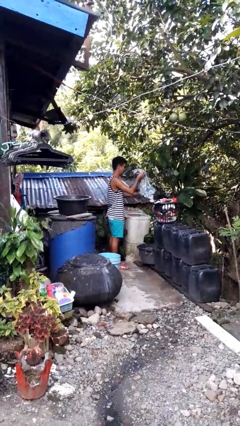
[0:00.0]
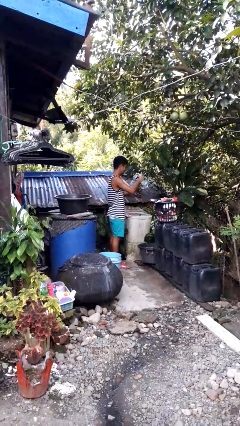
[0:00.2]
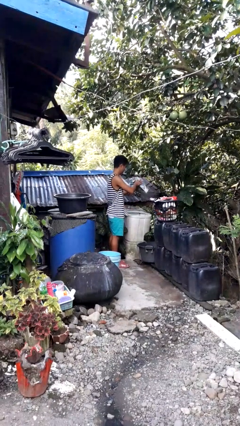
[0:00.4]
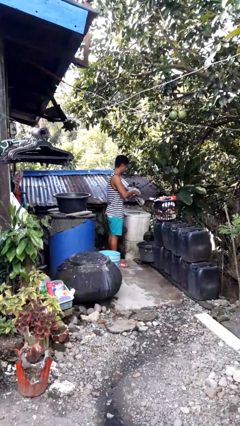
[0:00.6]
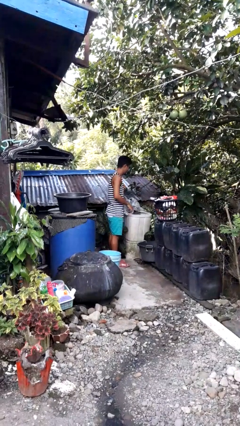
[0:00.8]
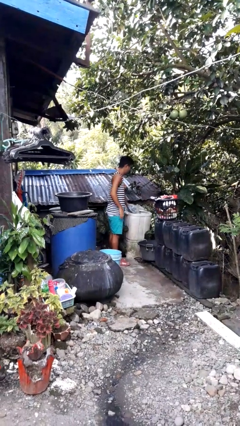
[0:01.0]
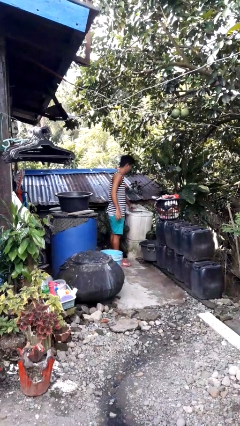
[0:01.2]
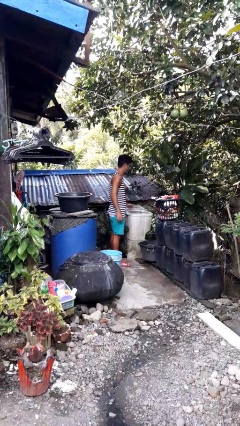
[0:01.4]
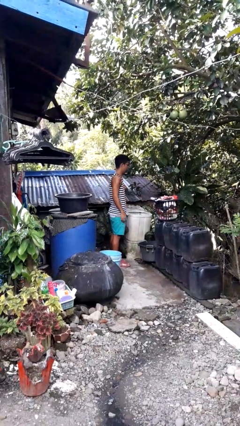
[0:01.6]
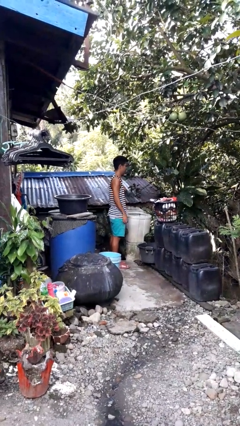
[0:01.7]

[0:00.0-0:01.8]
person loads clotheswasher

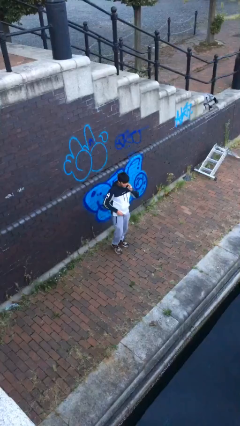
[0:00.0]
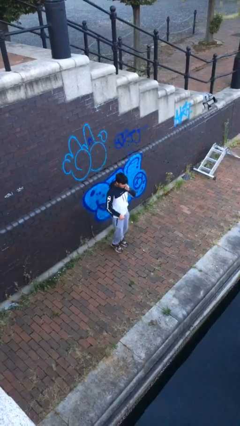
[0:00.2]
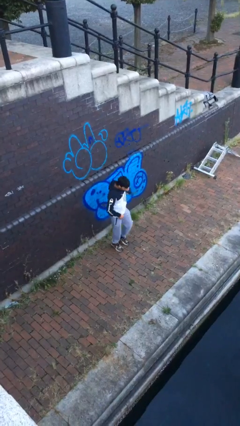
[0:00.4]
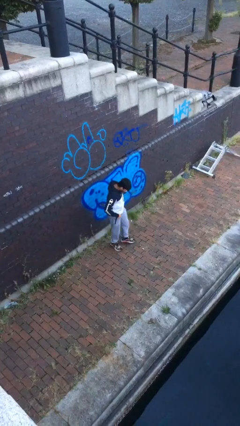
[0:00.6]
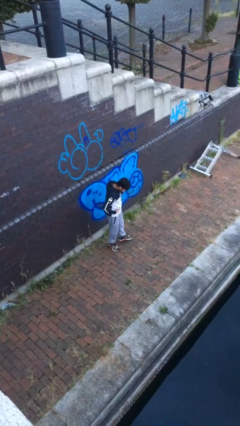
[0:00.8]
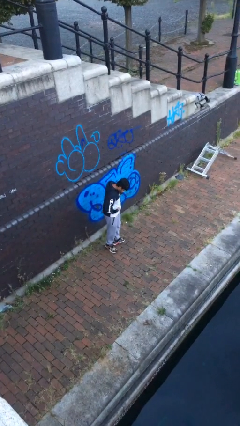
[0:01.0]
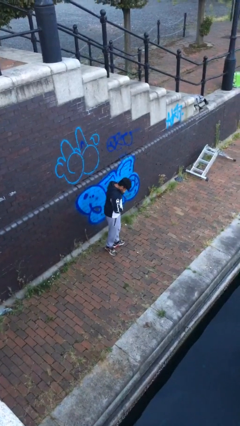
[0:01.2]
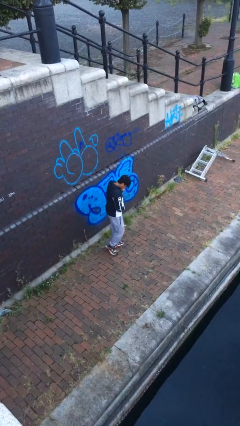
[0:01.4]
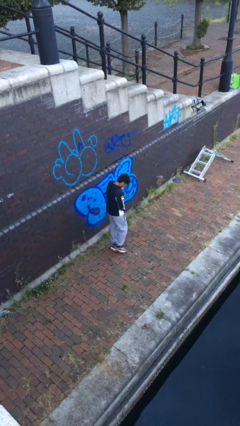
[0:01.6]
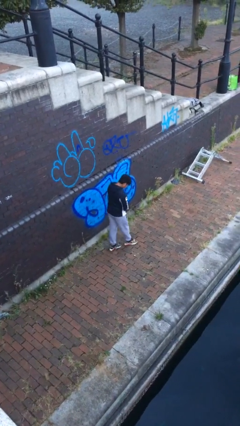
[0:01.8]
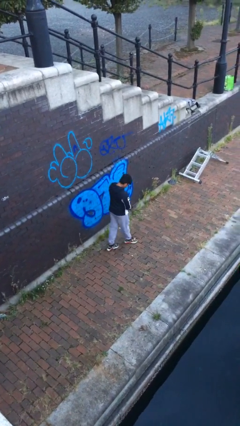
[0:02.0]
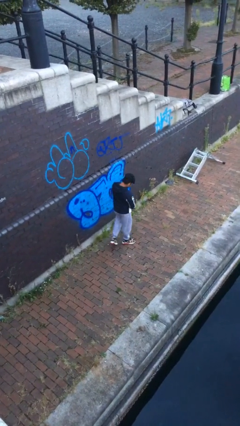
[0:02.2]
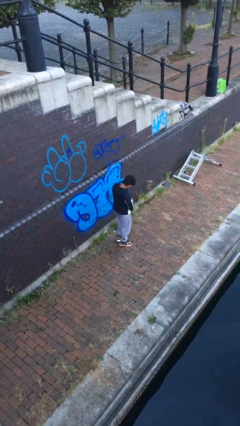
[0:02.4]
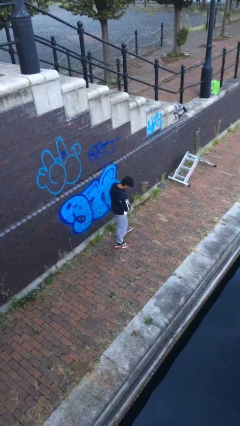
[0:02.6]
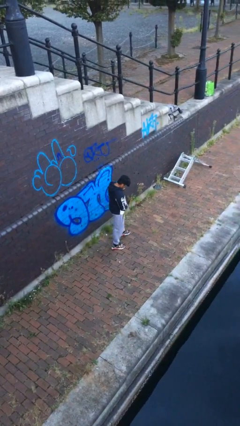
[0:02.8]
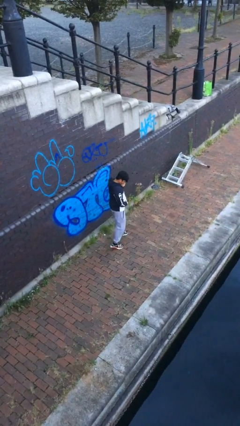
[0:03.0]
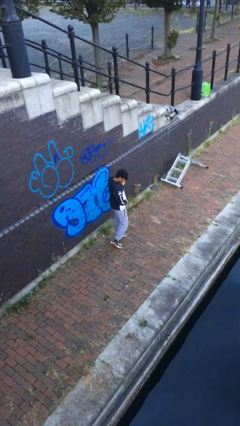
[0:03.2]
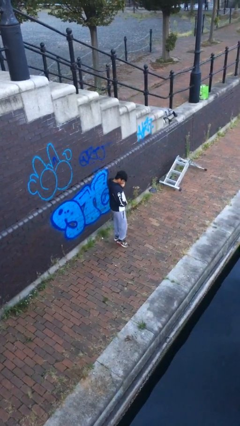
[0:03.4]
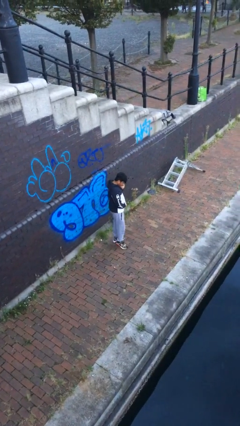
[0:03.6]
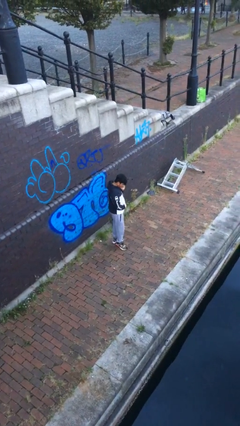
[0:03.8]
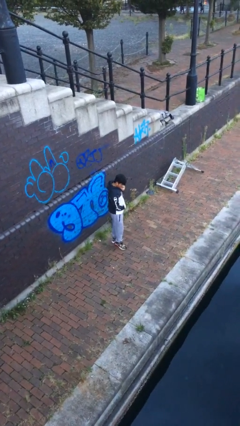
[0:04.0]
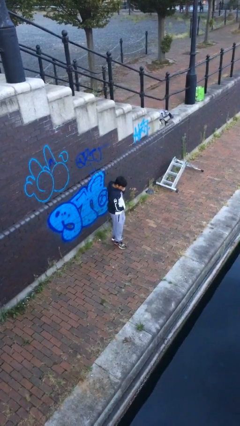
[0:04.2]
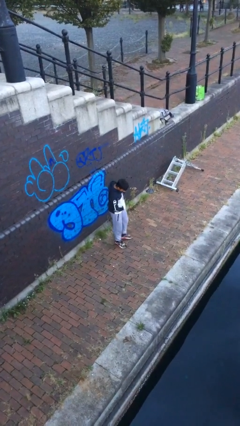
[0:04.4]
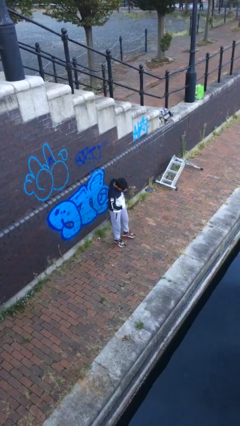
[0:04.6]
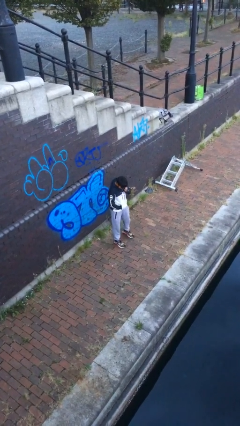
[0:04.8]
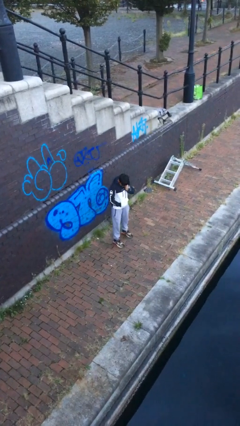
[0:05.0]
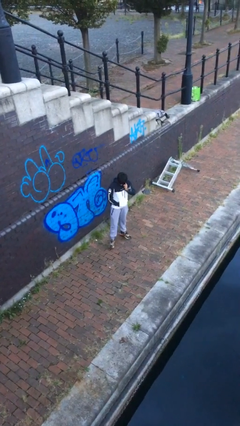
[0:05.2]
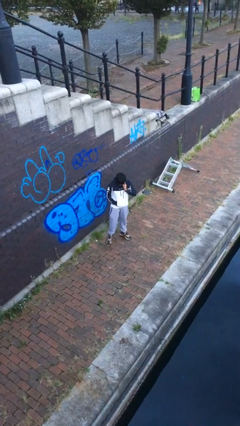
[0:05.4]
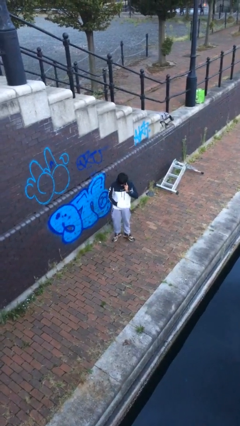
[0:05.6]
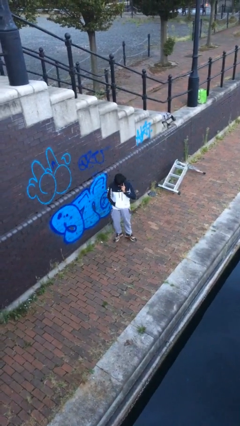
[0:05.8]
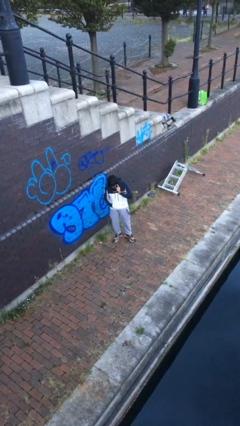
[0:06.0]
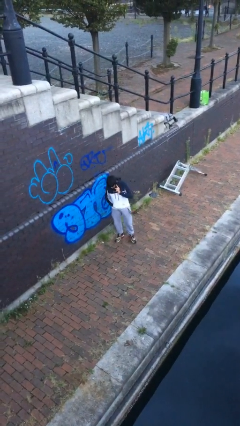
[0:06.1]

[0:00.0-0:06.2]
person talks on phone

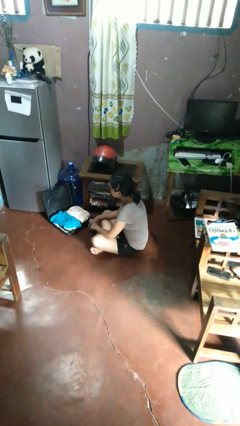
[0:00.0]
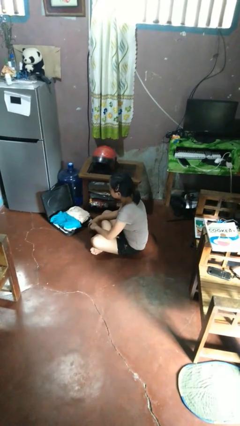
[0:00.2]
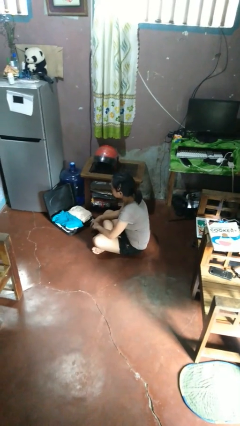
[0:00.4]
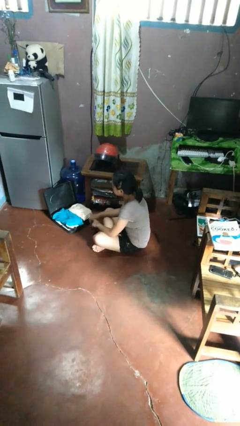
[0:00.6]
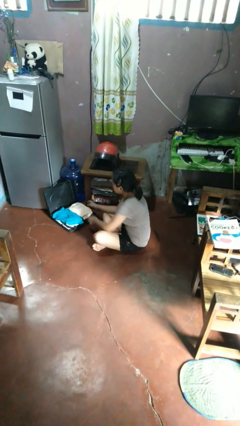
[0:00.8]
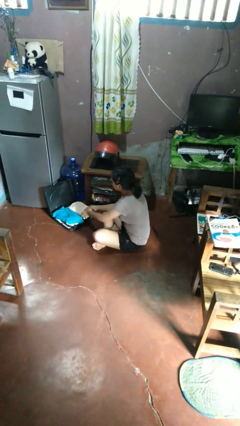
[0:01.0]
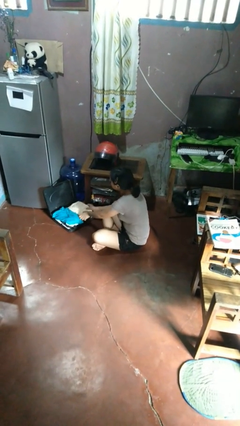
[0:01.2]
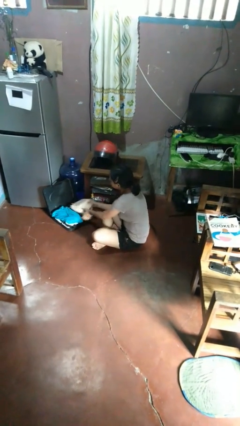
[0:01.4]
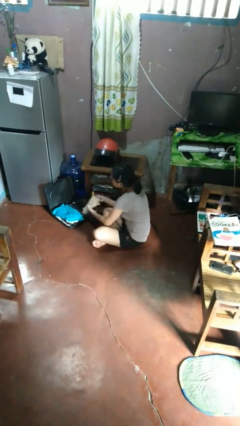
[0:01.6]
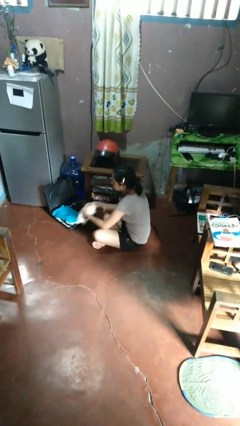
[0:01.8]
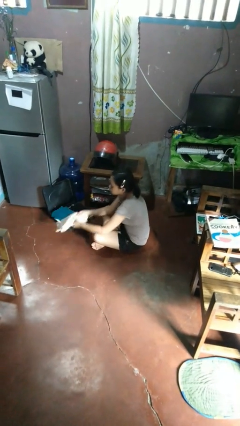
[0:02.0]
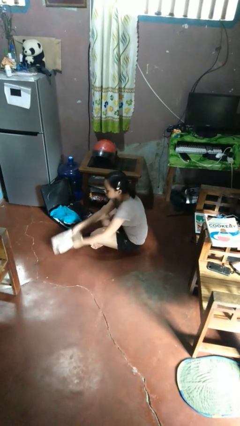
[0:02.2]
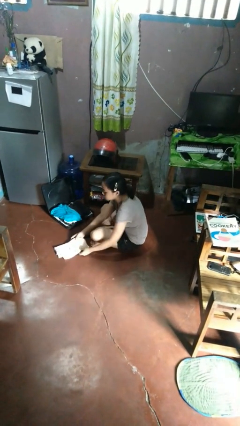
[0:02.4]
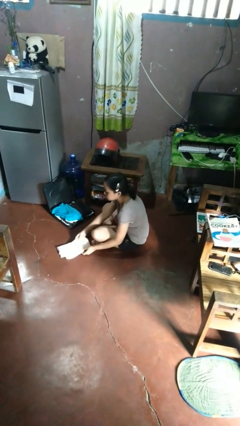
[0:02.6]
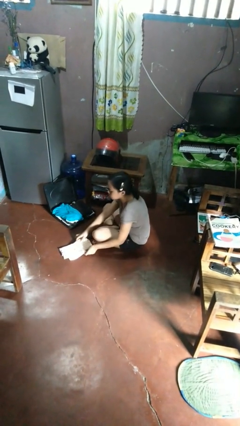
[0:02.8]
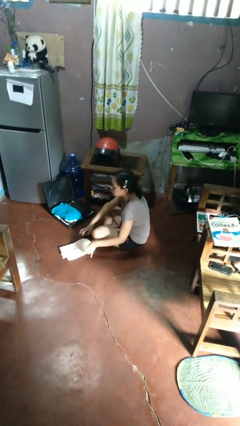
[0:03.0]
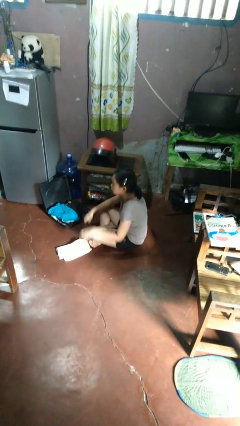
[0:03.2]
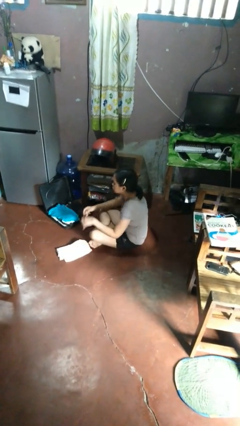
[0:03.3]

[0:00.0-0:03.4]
person unloads clothes from suitcase

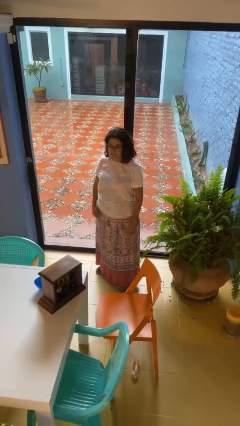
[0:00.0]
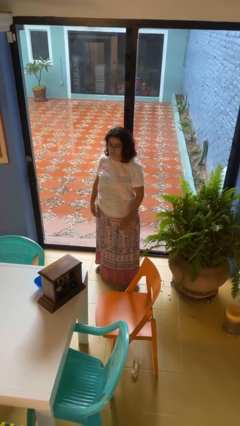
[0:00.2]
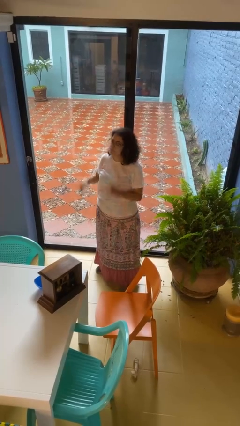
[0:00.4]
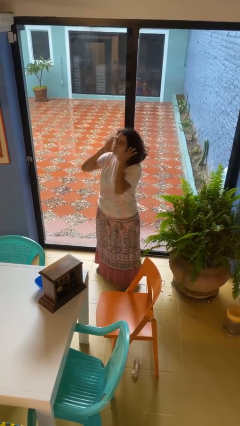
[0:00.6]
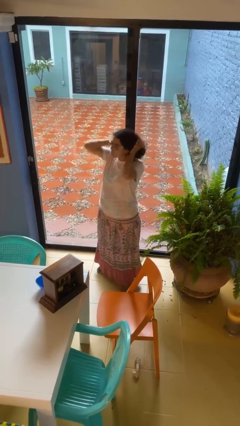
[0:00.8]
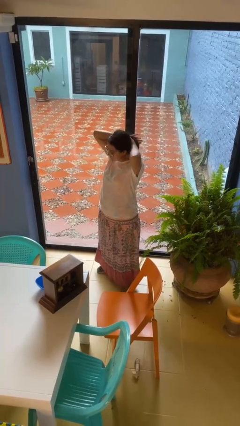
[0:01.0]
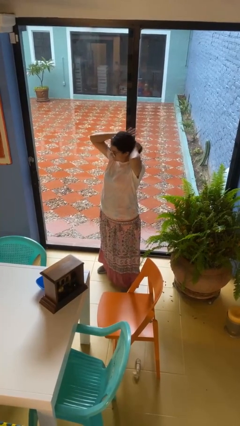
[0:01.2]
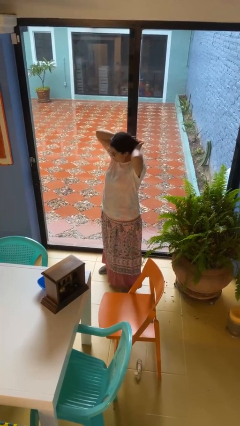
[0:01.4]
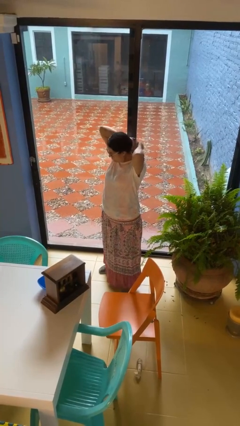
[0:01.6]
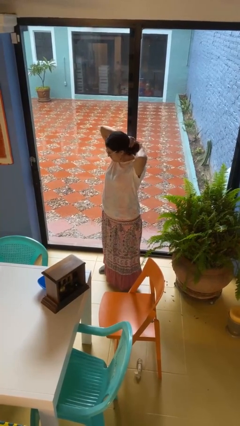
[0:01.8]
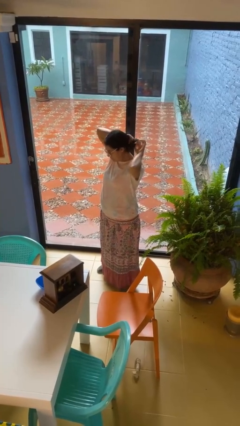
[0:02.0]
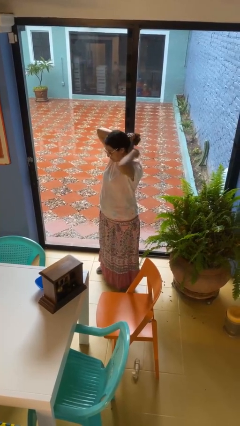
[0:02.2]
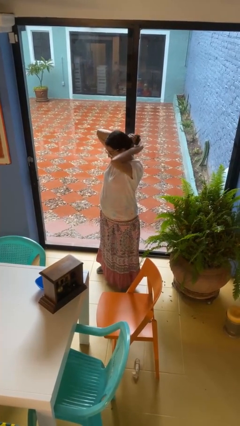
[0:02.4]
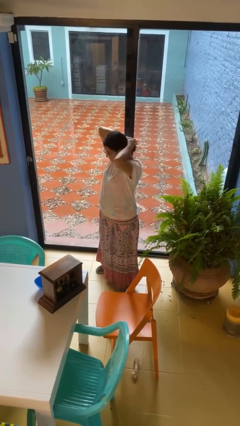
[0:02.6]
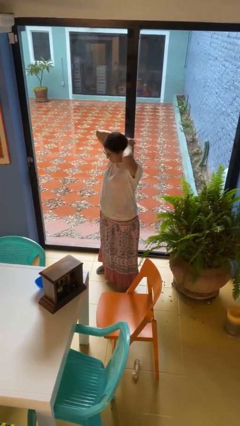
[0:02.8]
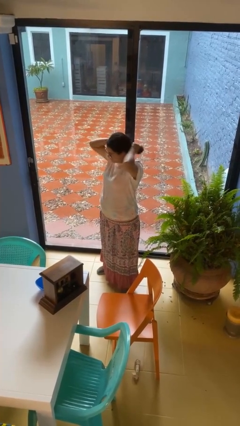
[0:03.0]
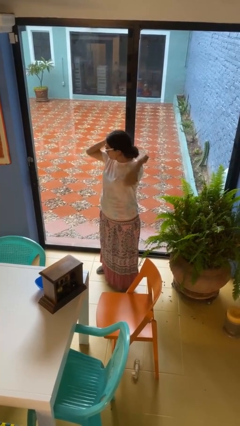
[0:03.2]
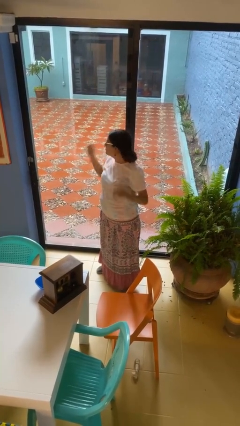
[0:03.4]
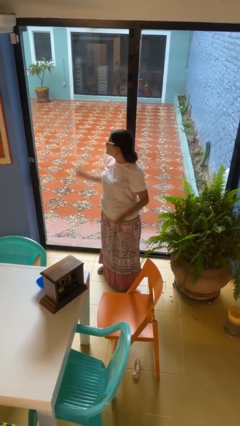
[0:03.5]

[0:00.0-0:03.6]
person puts hair in ponytail

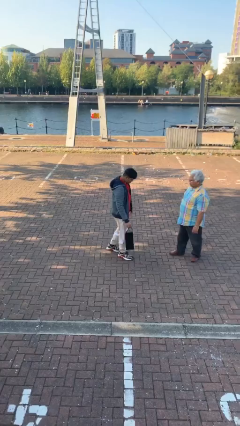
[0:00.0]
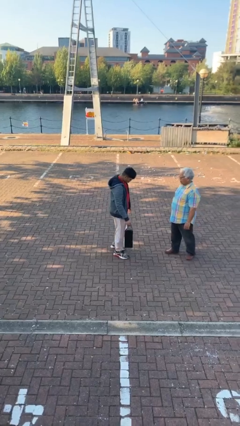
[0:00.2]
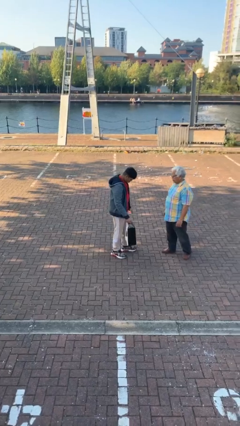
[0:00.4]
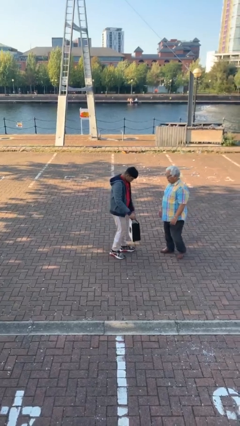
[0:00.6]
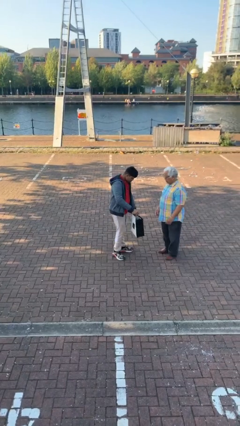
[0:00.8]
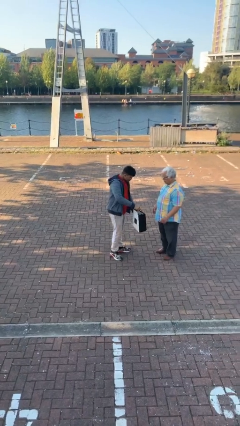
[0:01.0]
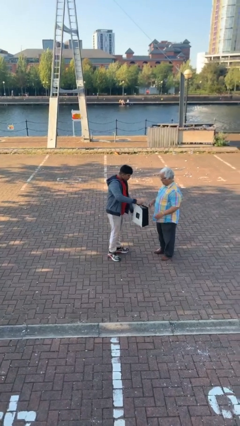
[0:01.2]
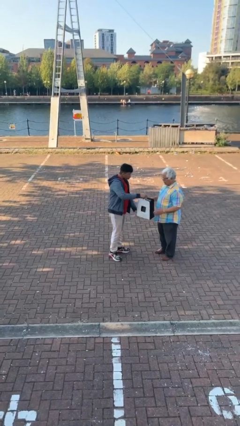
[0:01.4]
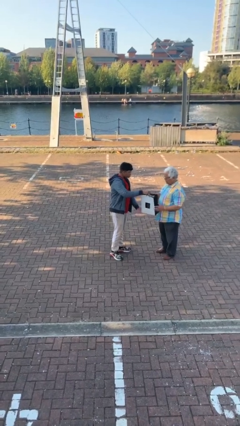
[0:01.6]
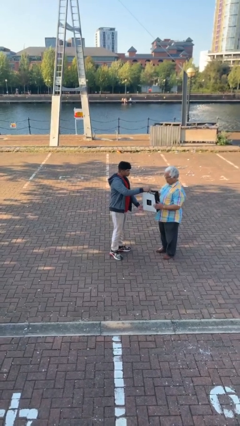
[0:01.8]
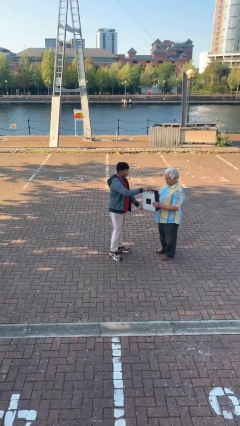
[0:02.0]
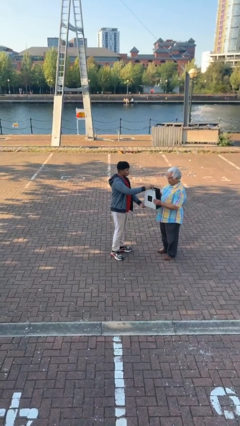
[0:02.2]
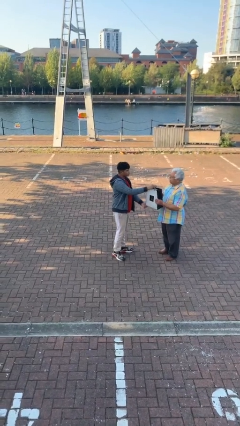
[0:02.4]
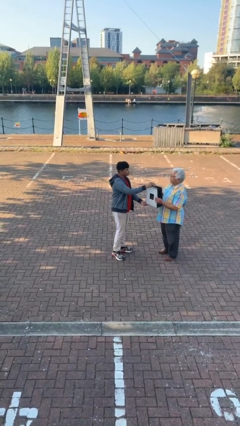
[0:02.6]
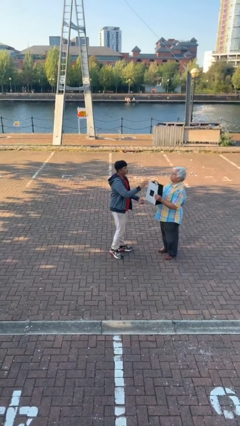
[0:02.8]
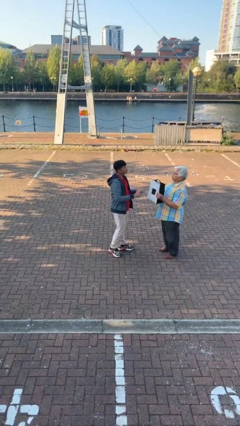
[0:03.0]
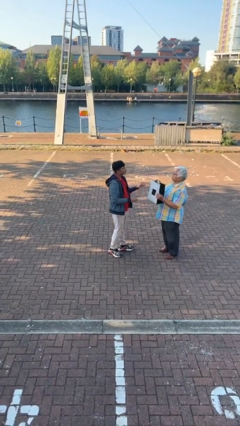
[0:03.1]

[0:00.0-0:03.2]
person transfers object to person
